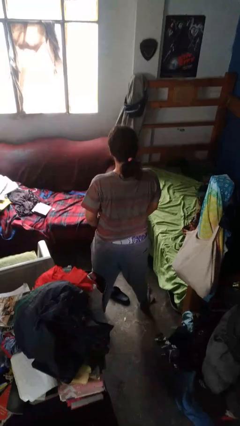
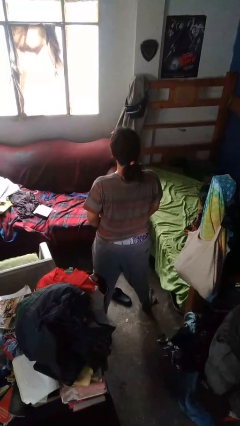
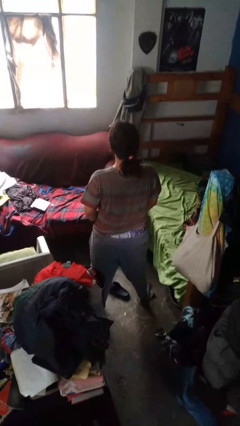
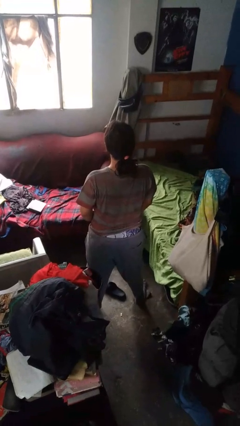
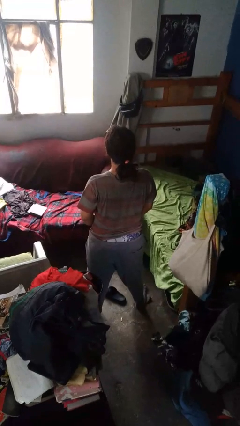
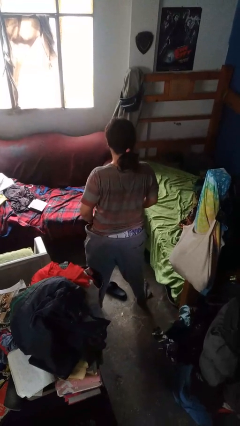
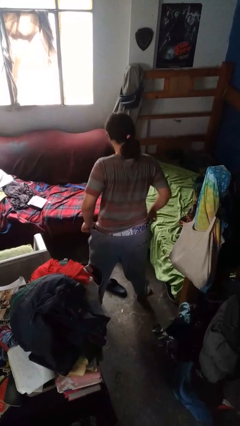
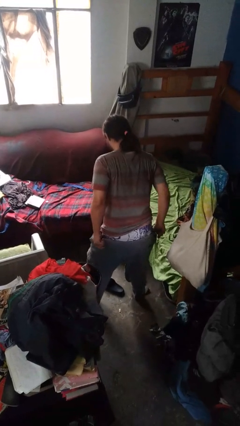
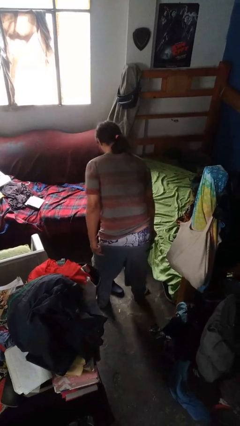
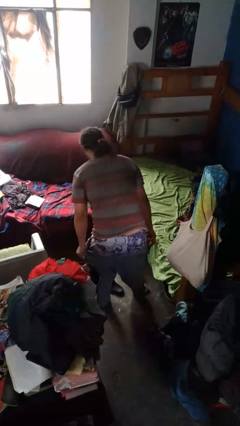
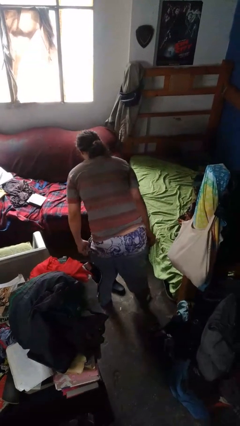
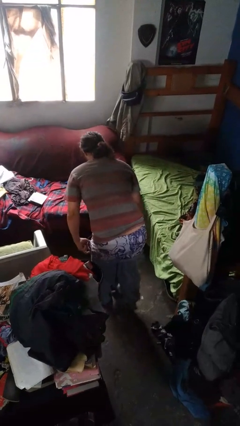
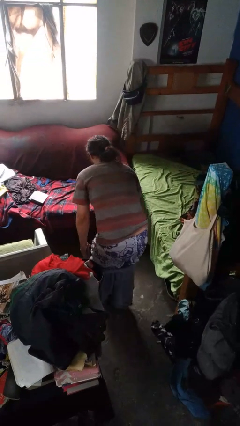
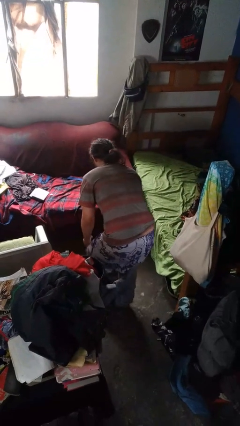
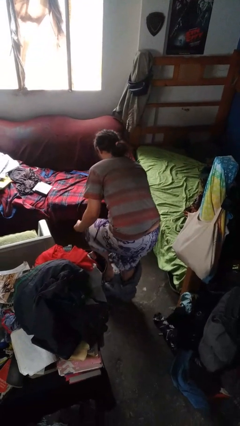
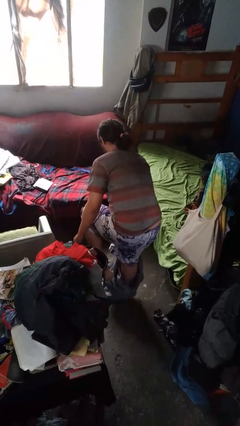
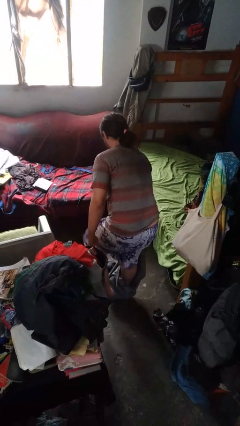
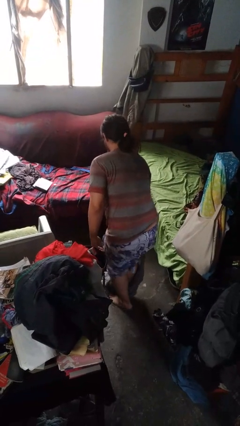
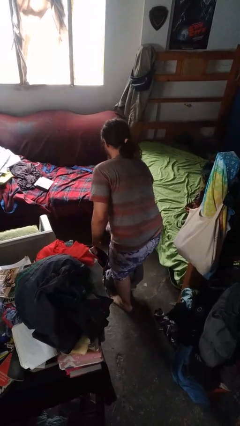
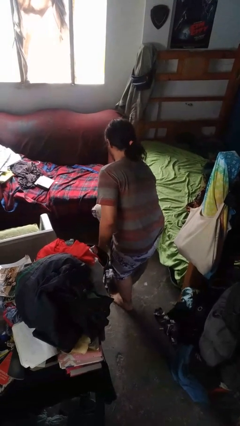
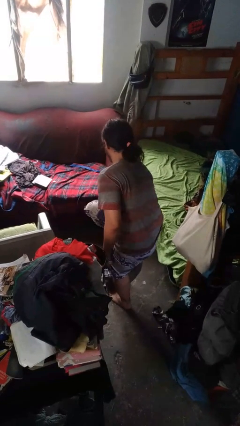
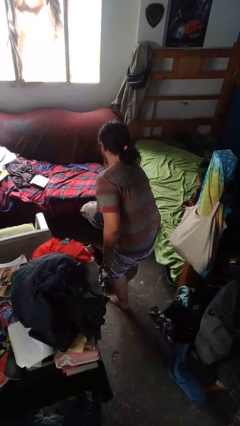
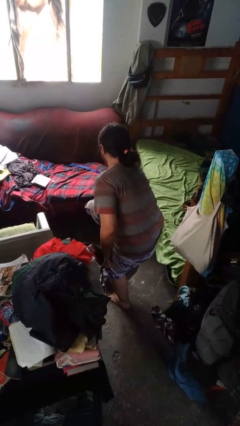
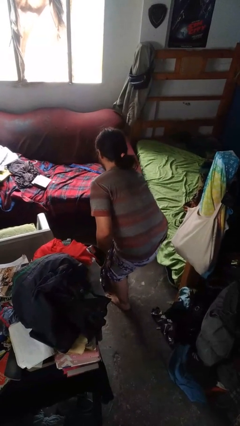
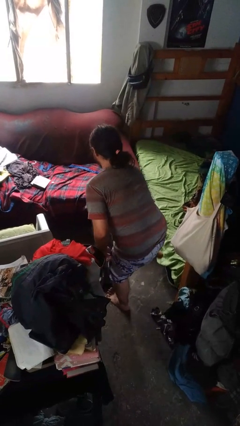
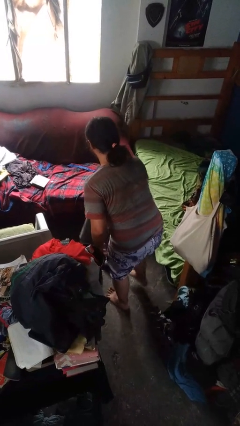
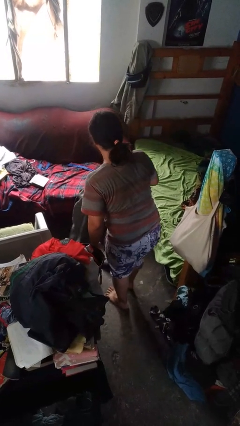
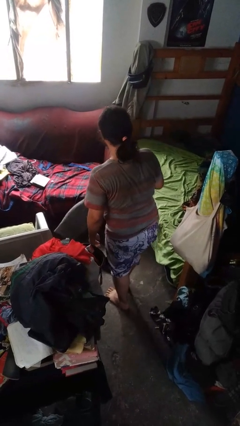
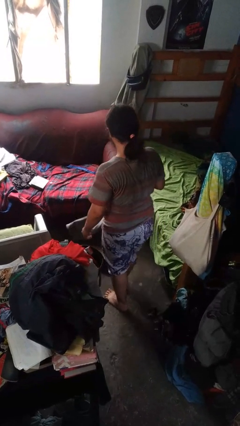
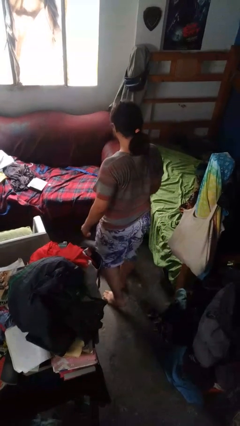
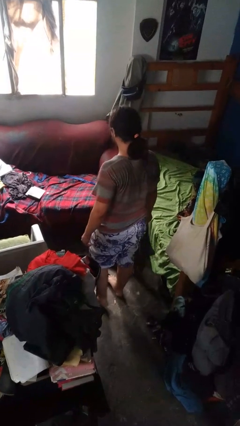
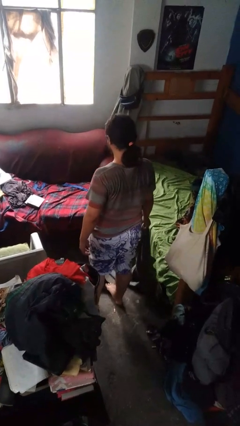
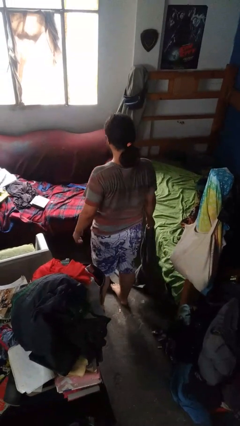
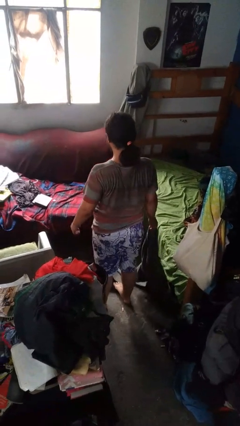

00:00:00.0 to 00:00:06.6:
person takes off pants

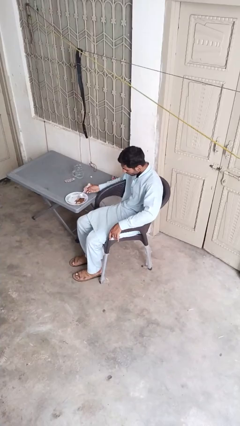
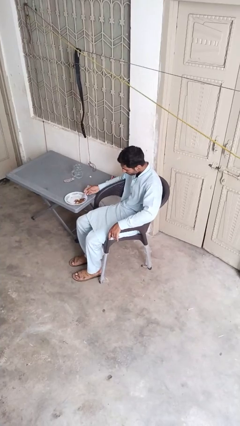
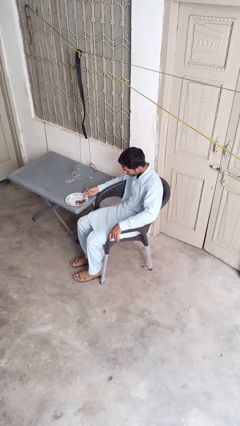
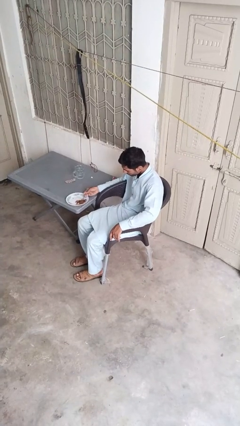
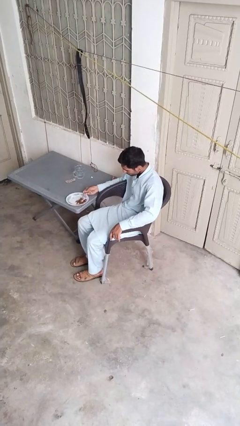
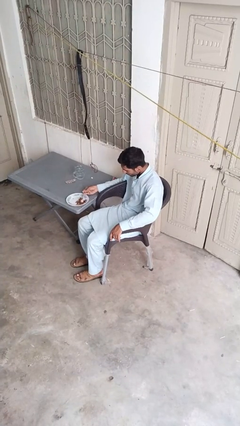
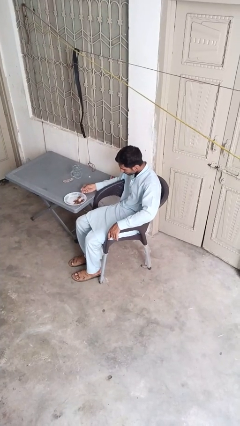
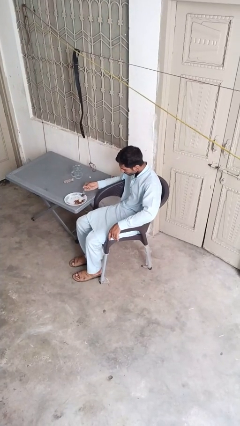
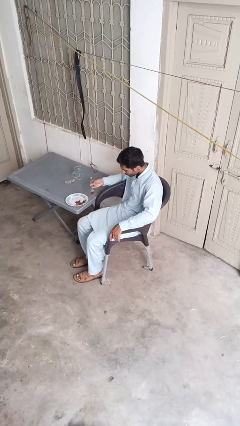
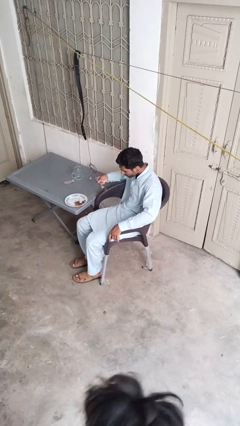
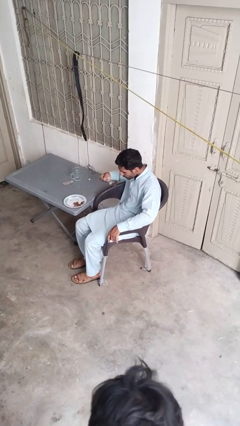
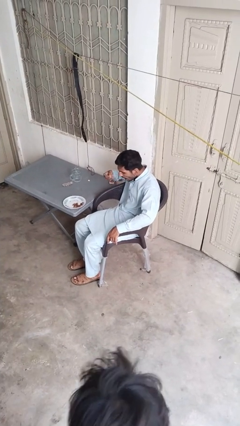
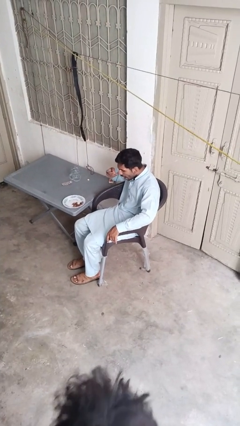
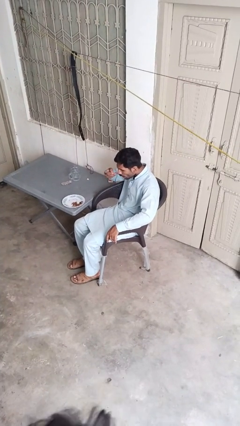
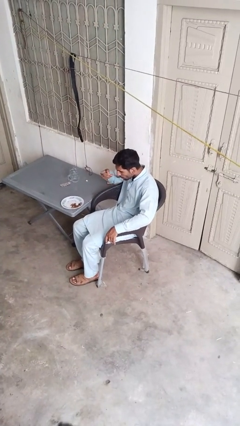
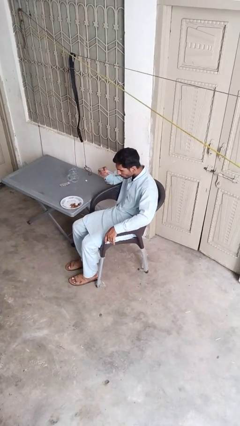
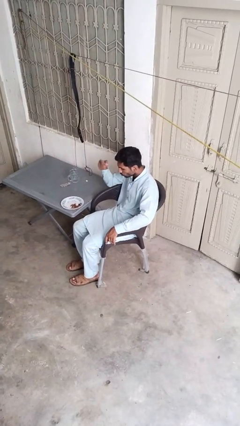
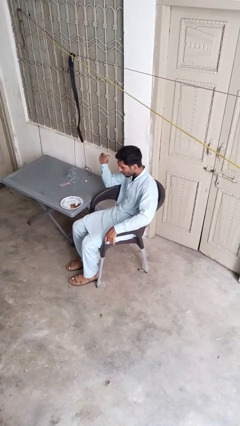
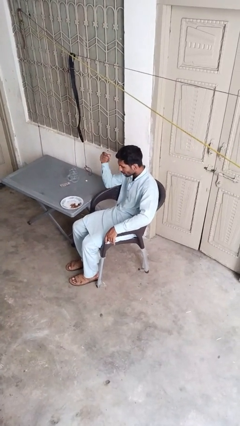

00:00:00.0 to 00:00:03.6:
person eats with utensil

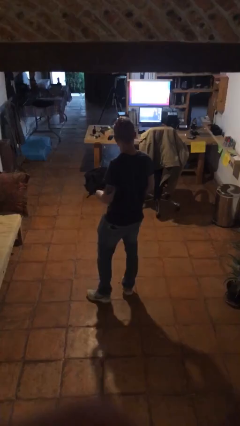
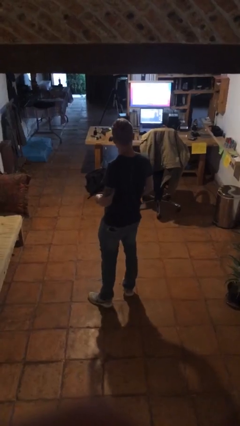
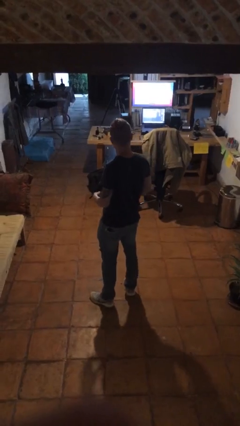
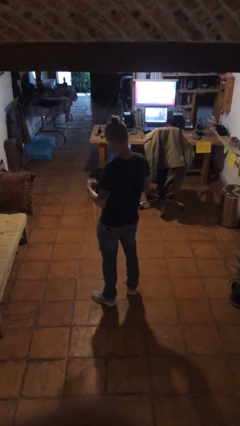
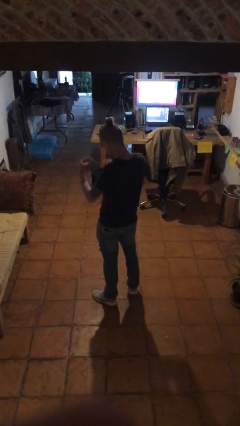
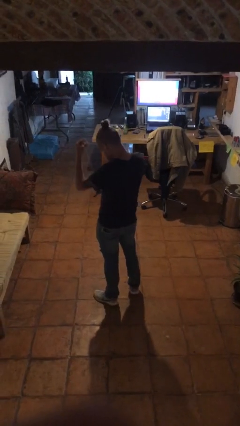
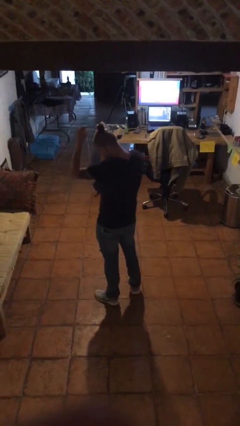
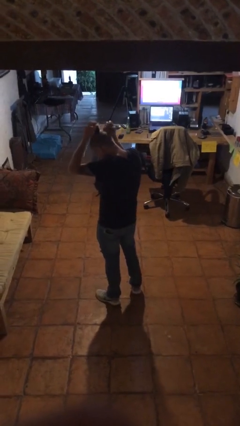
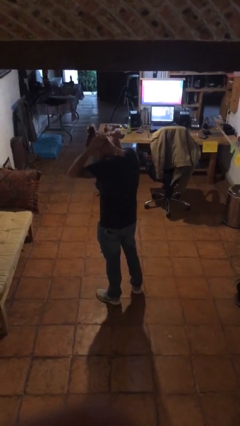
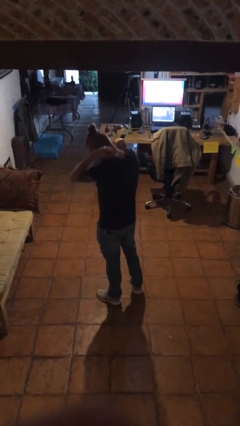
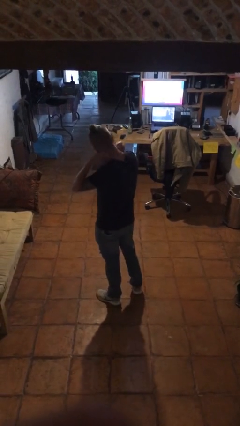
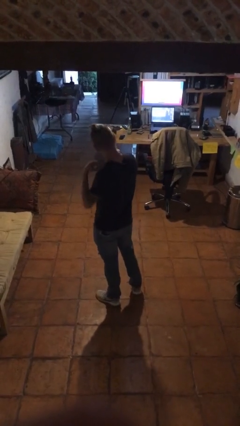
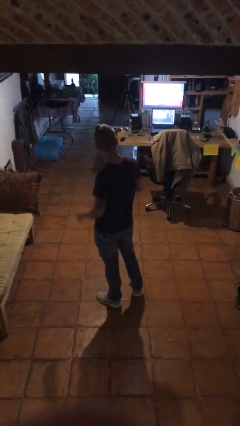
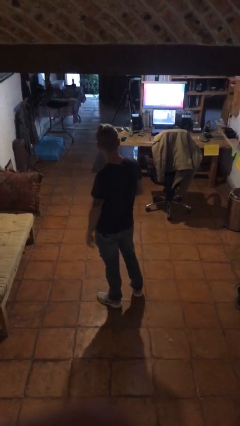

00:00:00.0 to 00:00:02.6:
person puts on necklace

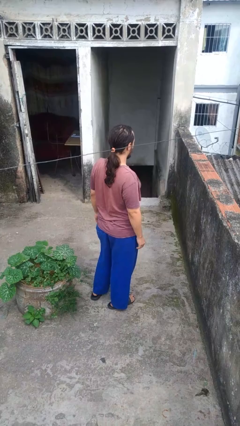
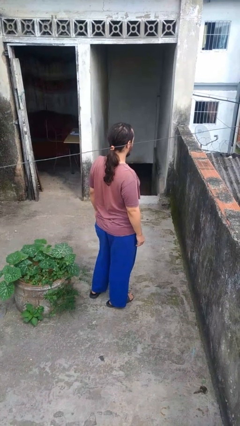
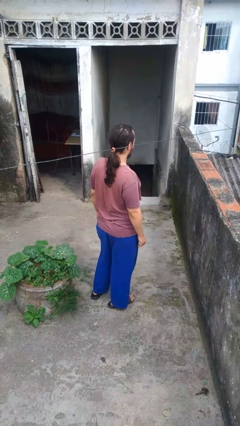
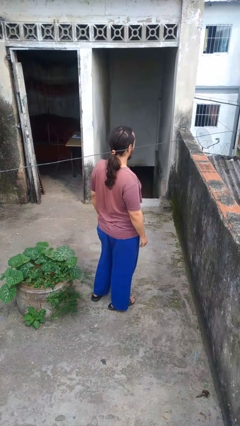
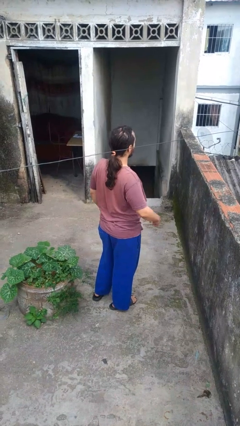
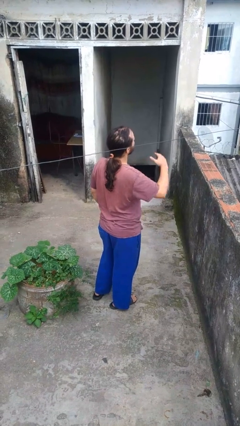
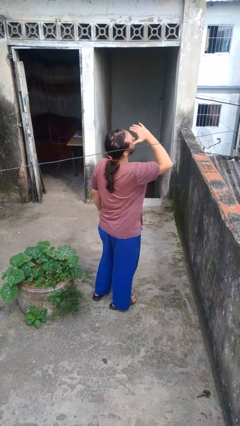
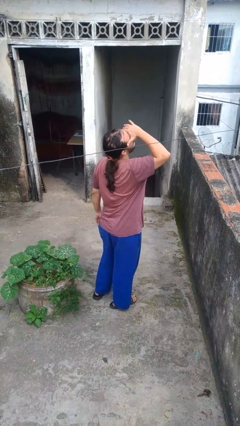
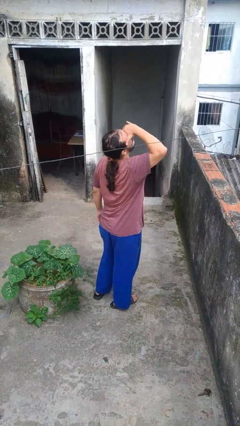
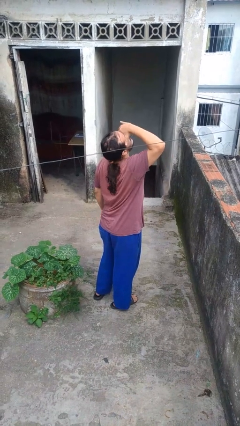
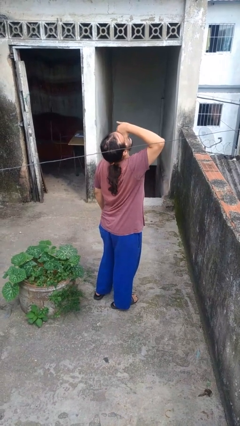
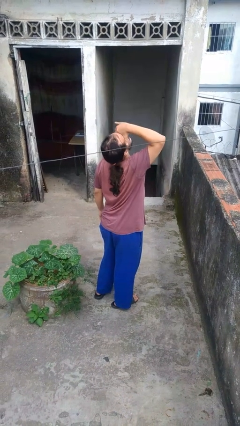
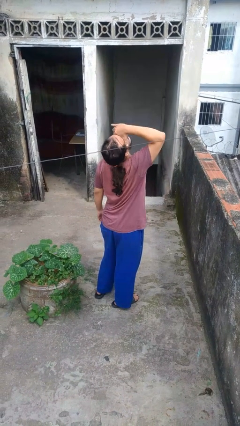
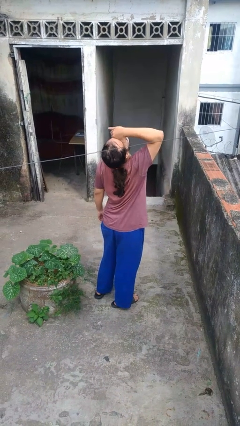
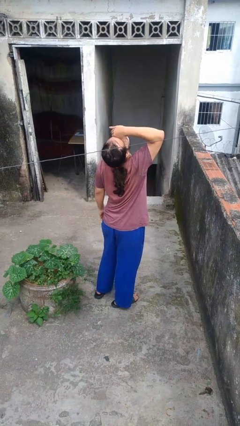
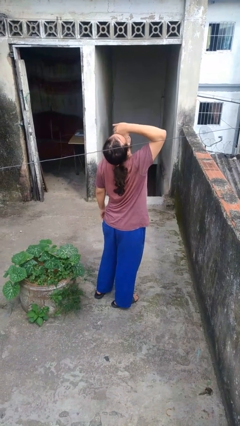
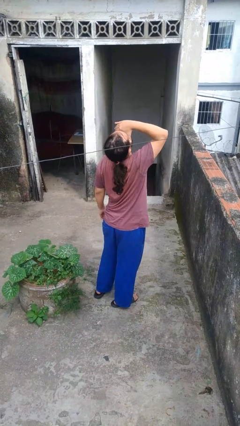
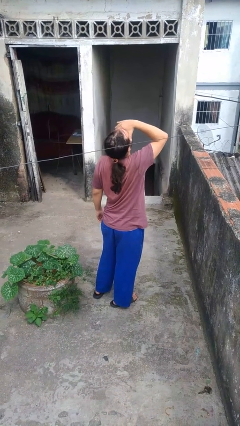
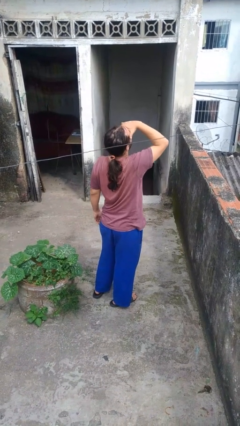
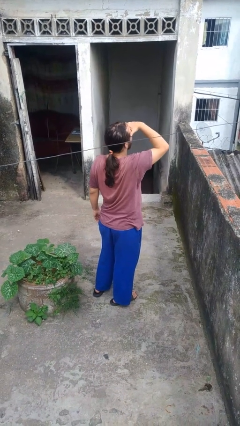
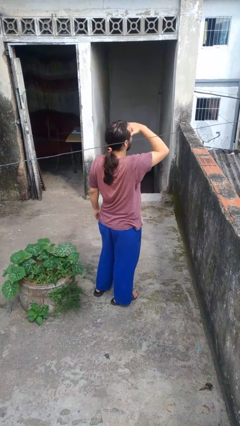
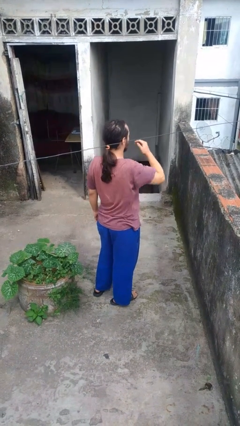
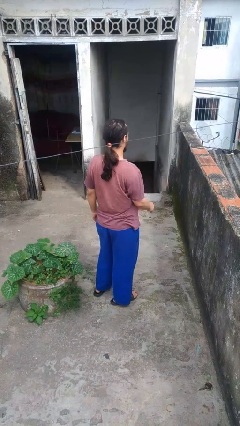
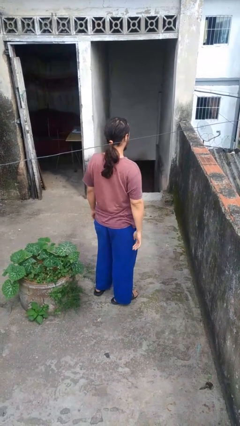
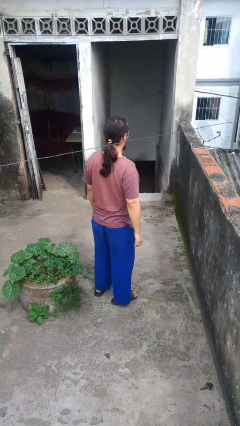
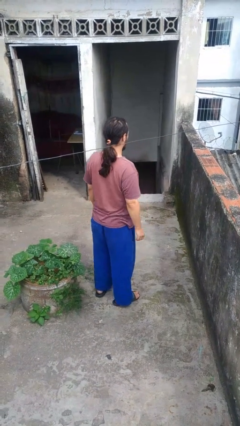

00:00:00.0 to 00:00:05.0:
person shades eyes

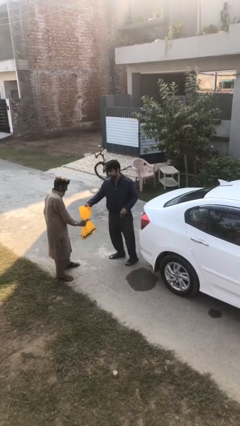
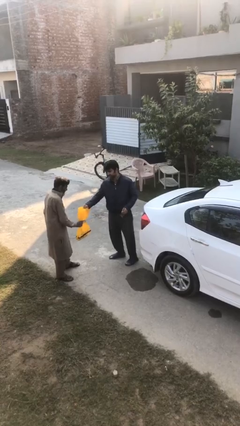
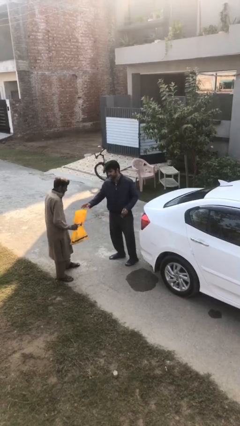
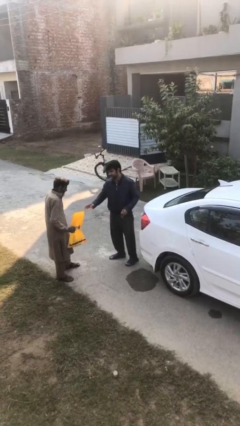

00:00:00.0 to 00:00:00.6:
person transfers object to person
